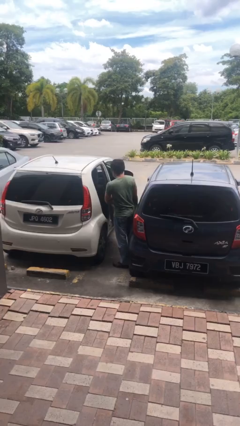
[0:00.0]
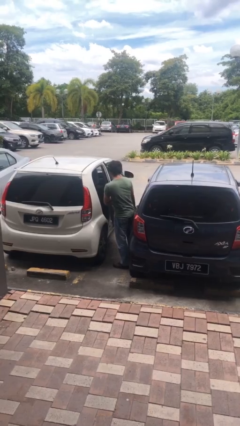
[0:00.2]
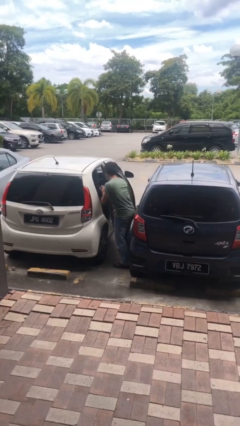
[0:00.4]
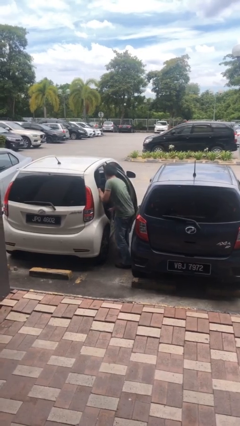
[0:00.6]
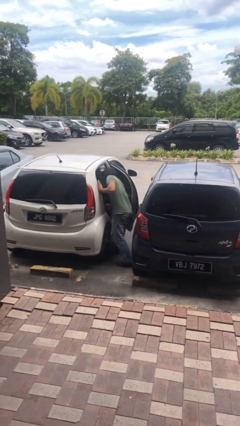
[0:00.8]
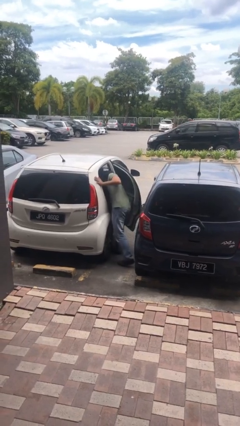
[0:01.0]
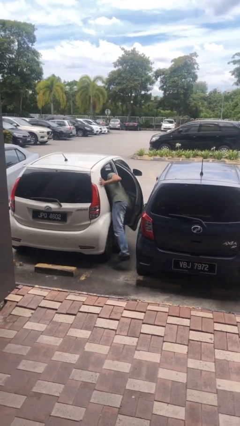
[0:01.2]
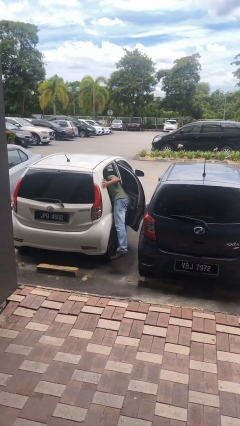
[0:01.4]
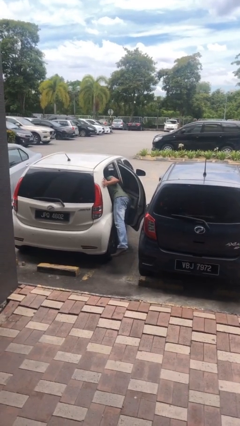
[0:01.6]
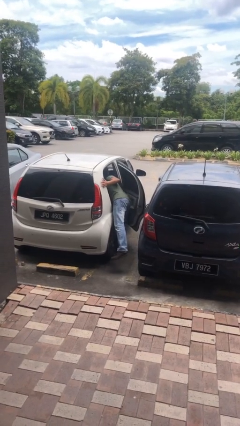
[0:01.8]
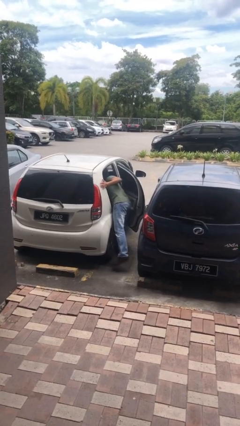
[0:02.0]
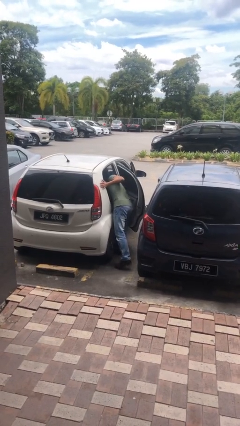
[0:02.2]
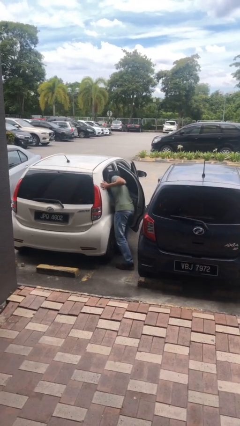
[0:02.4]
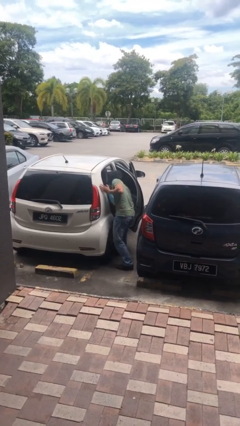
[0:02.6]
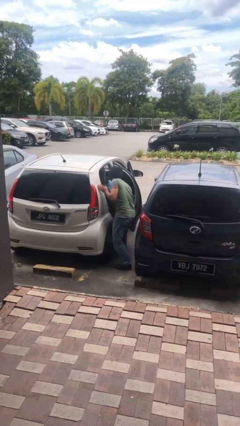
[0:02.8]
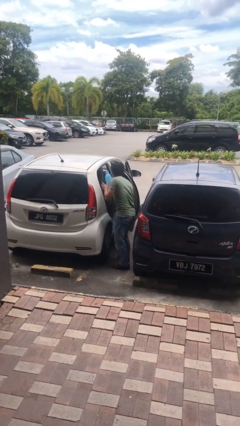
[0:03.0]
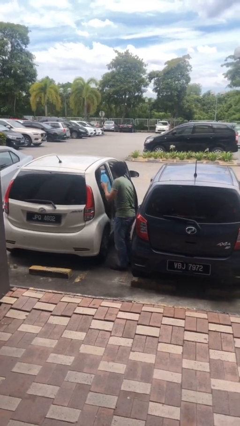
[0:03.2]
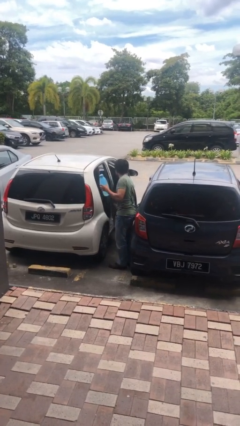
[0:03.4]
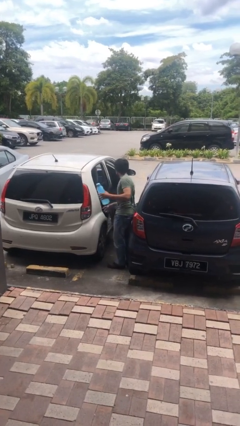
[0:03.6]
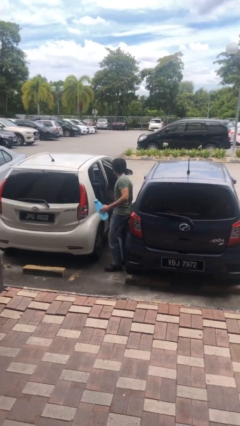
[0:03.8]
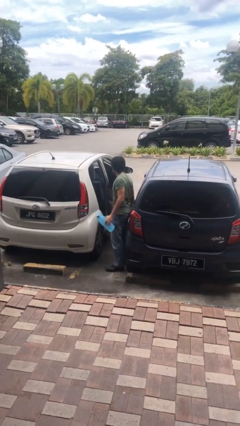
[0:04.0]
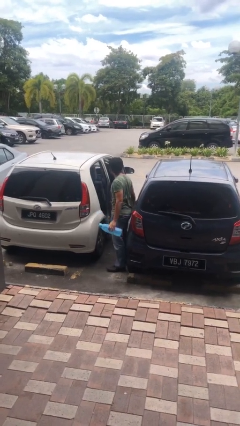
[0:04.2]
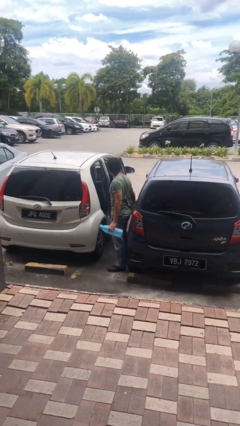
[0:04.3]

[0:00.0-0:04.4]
person unloads car

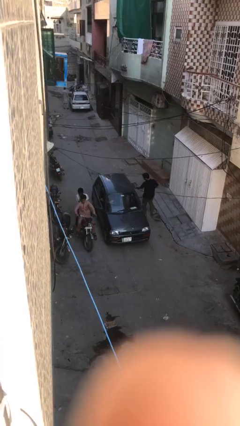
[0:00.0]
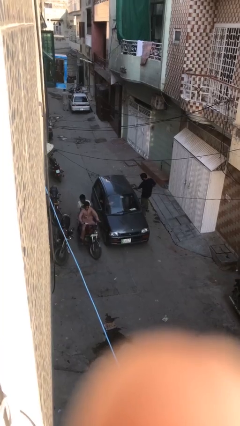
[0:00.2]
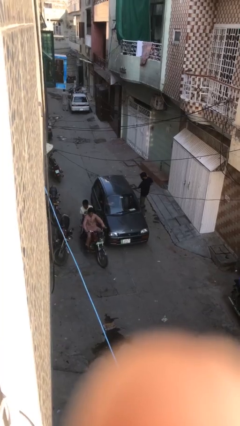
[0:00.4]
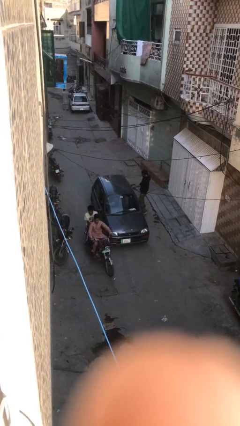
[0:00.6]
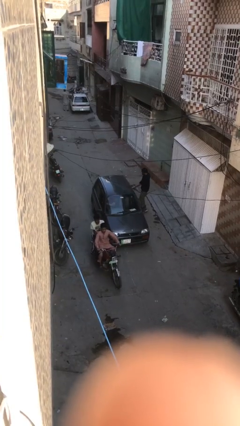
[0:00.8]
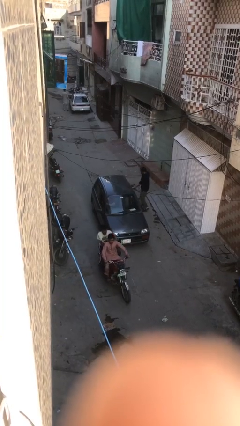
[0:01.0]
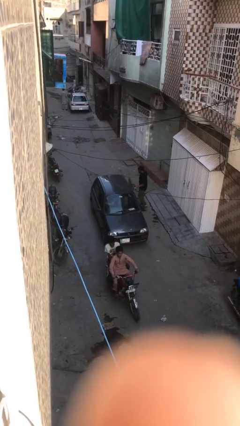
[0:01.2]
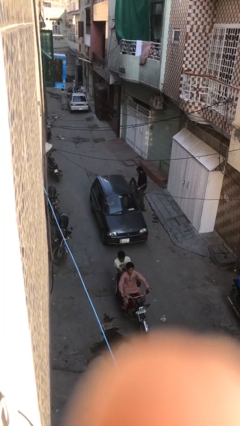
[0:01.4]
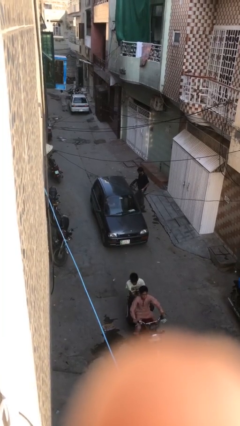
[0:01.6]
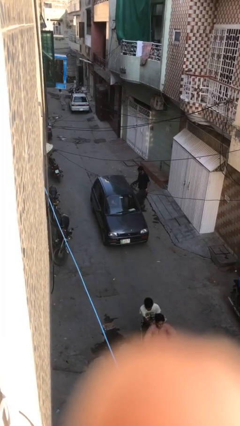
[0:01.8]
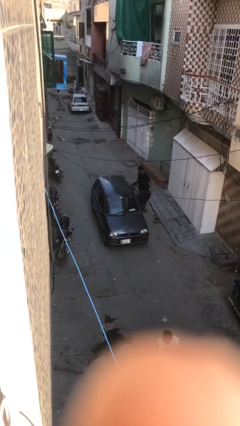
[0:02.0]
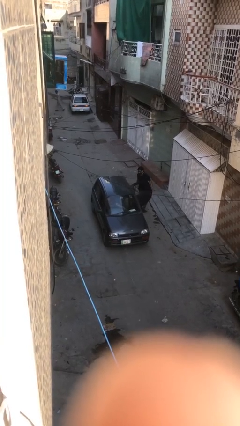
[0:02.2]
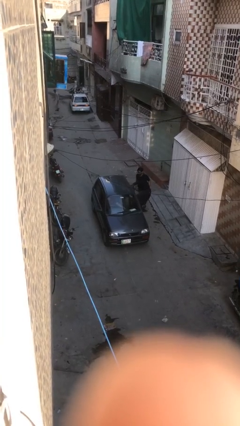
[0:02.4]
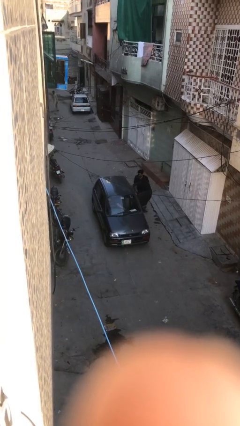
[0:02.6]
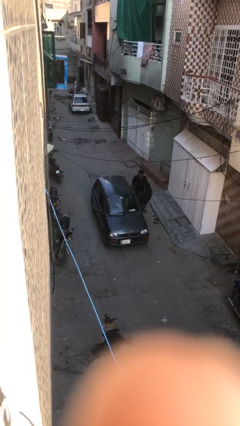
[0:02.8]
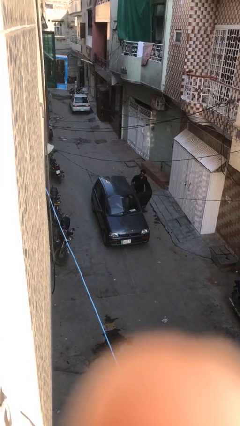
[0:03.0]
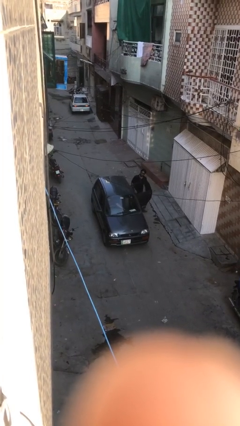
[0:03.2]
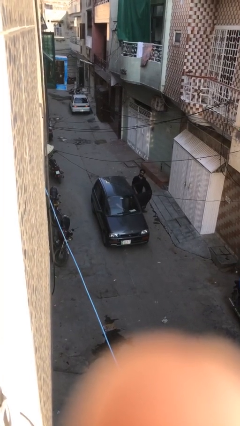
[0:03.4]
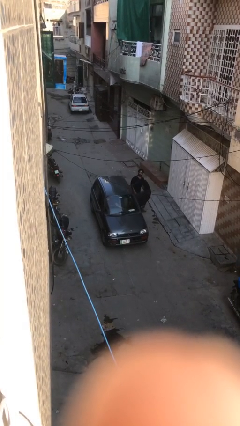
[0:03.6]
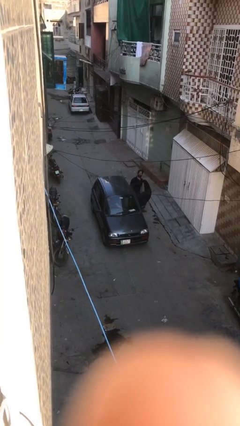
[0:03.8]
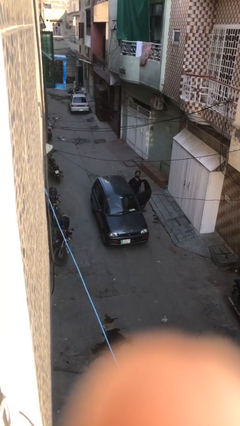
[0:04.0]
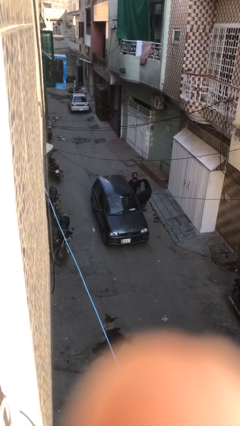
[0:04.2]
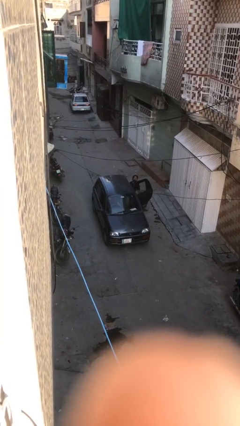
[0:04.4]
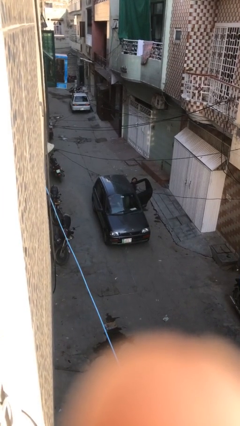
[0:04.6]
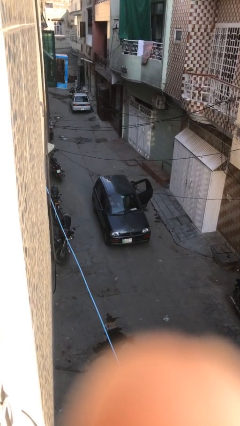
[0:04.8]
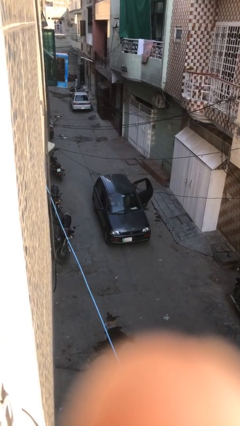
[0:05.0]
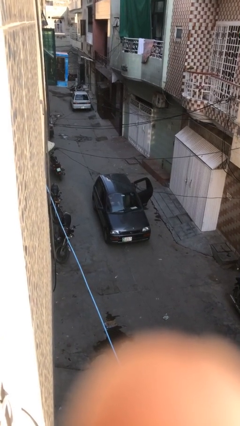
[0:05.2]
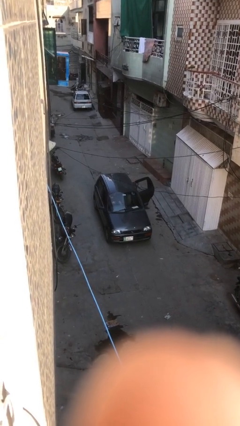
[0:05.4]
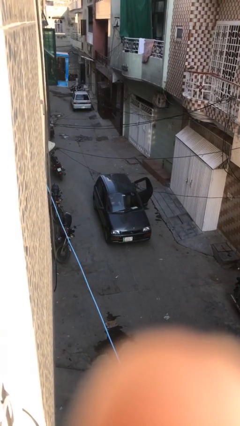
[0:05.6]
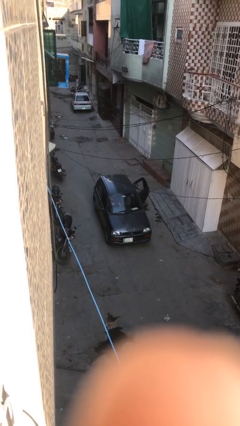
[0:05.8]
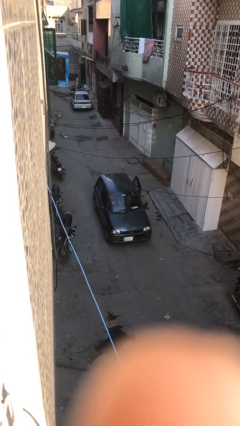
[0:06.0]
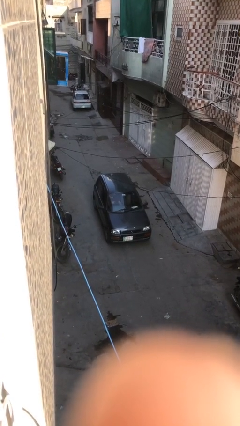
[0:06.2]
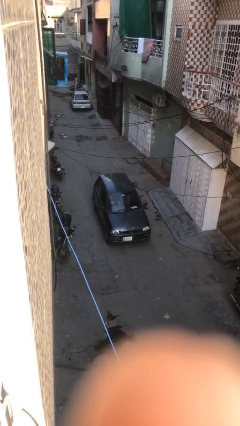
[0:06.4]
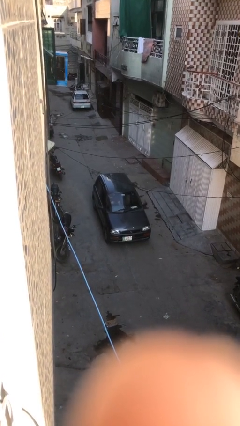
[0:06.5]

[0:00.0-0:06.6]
car picks up person

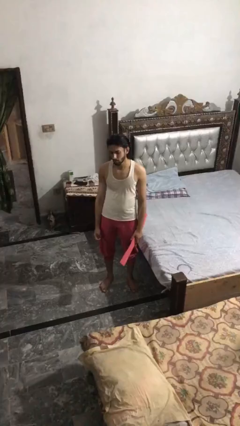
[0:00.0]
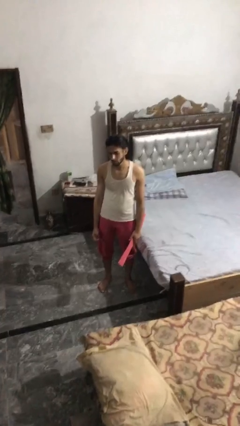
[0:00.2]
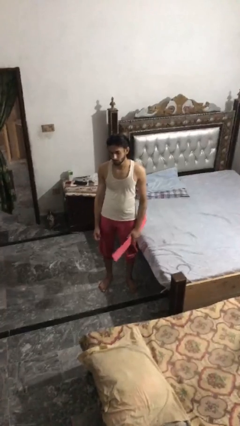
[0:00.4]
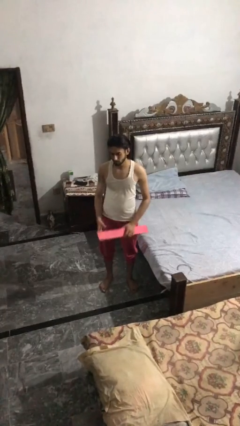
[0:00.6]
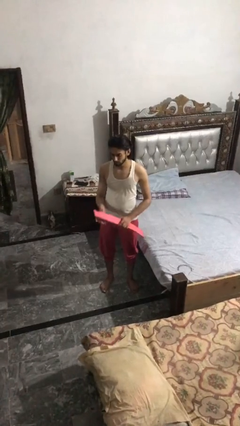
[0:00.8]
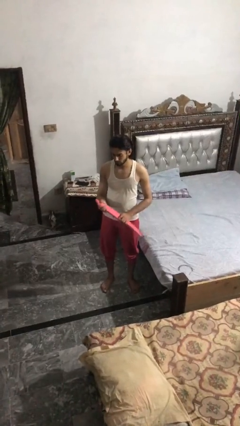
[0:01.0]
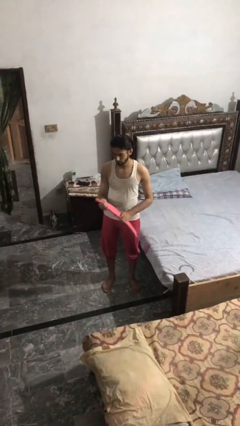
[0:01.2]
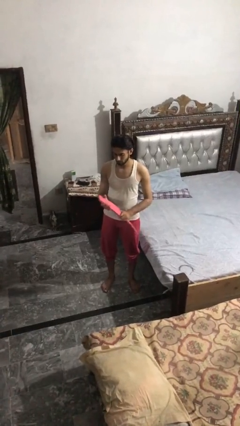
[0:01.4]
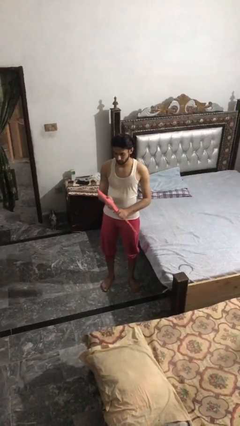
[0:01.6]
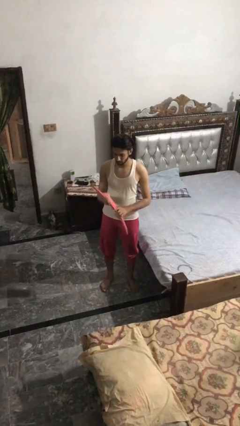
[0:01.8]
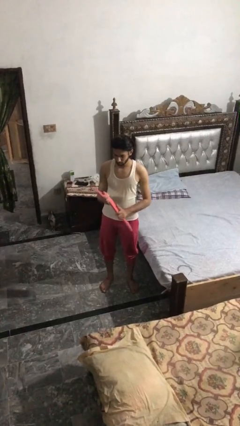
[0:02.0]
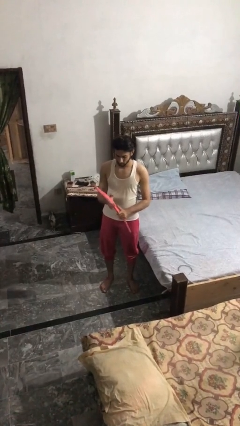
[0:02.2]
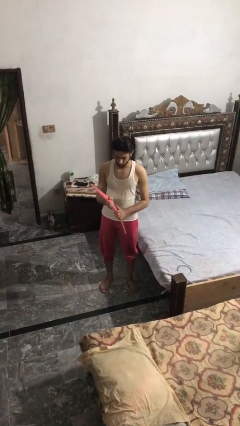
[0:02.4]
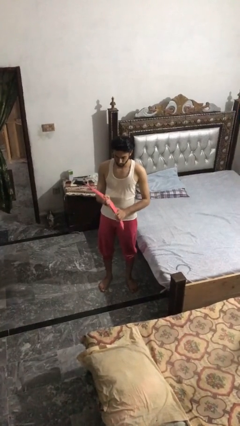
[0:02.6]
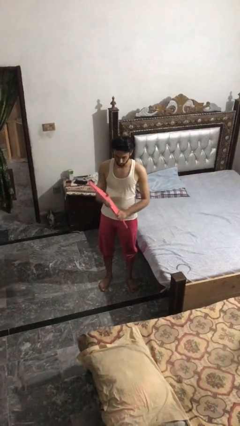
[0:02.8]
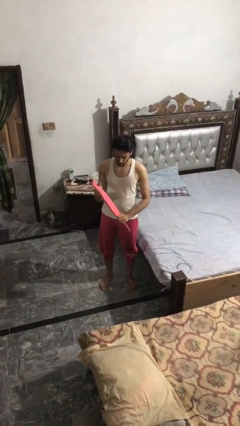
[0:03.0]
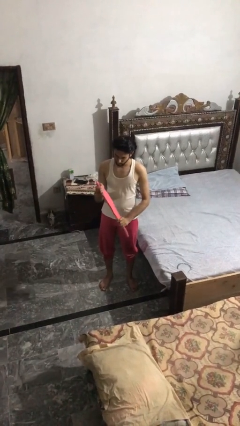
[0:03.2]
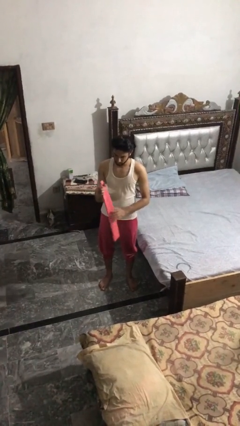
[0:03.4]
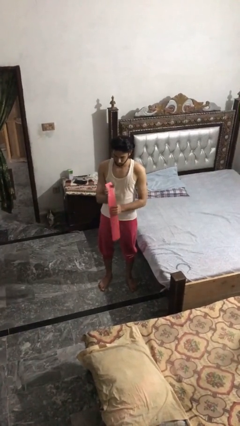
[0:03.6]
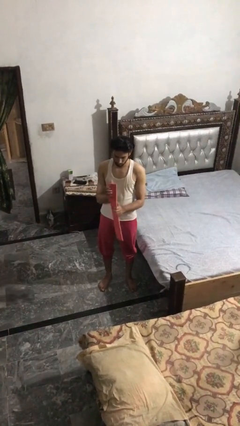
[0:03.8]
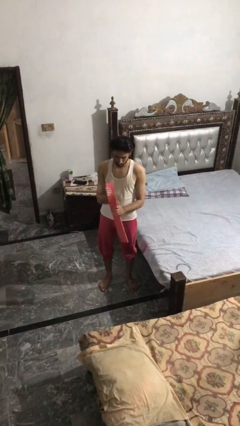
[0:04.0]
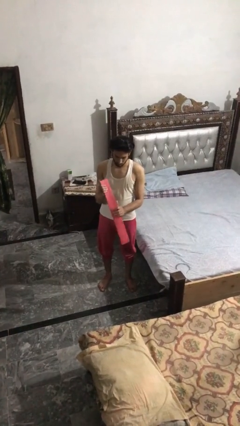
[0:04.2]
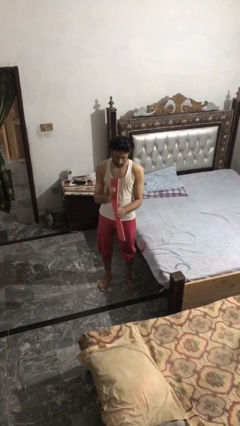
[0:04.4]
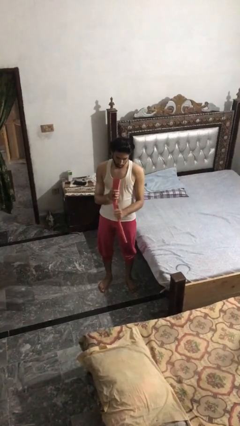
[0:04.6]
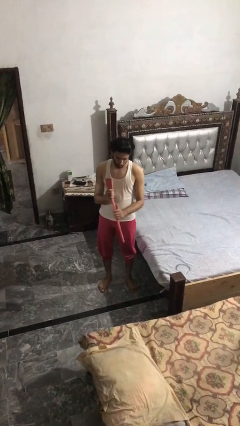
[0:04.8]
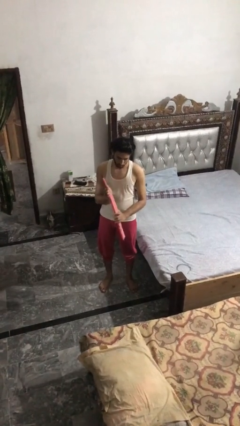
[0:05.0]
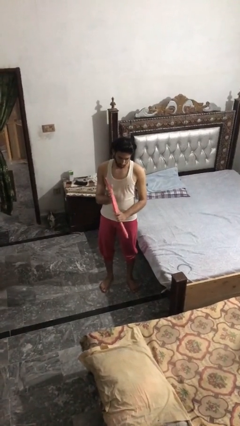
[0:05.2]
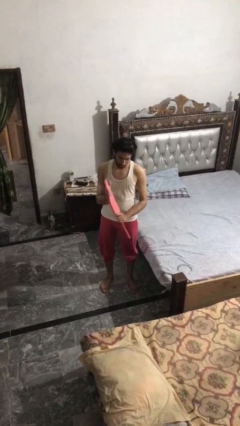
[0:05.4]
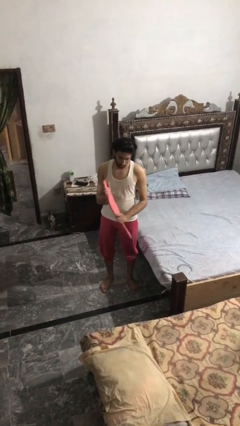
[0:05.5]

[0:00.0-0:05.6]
person squeezes object

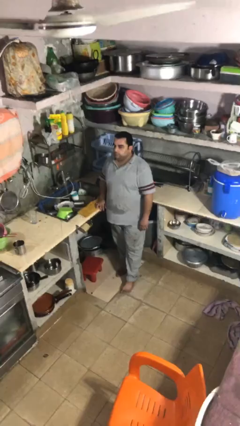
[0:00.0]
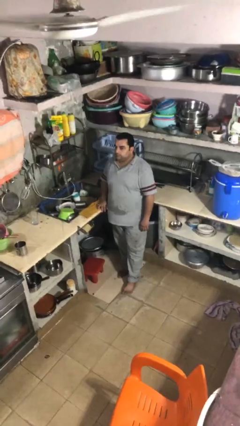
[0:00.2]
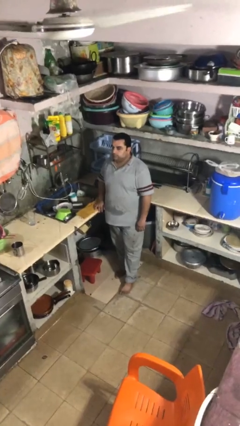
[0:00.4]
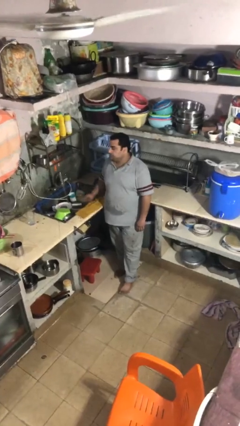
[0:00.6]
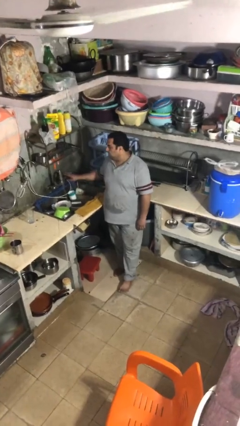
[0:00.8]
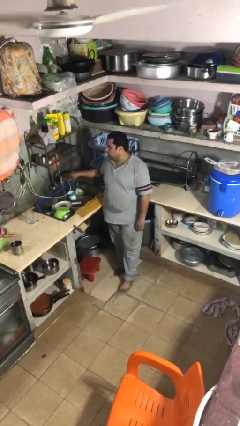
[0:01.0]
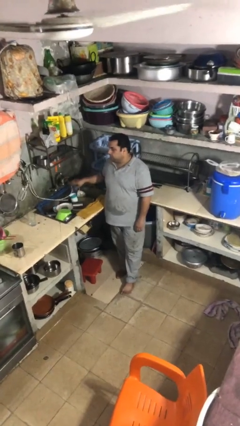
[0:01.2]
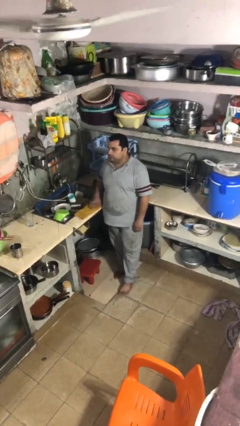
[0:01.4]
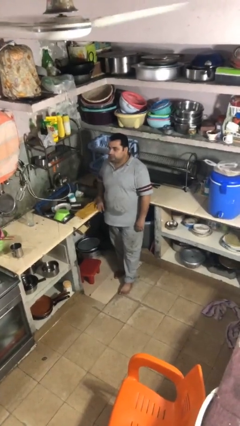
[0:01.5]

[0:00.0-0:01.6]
person turns off faucet
